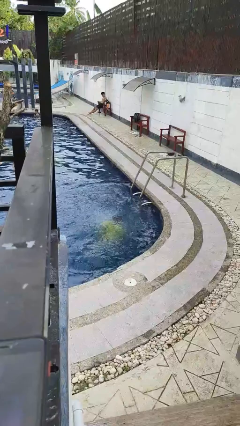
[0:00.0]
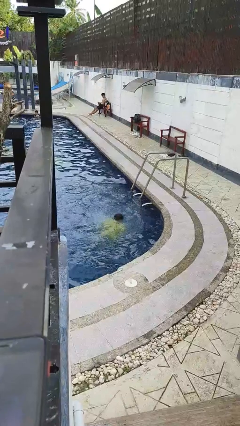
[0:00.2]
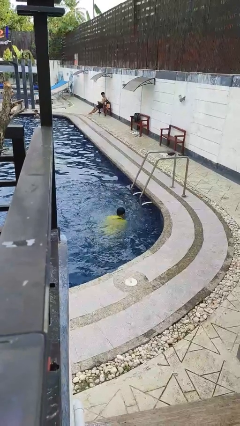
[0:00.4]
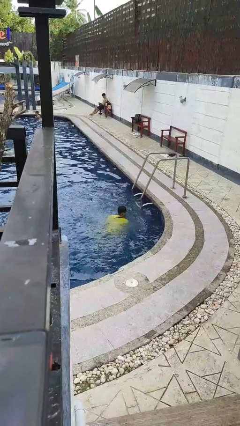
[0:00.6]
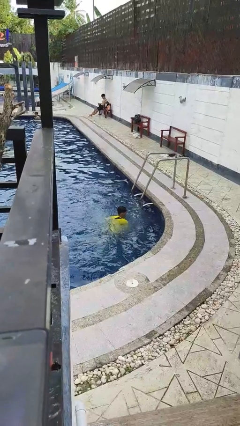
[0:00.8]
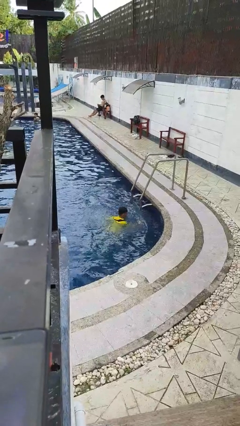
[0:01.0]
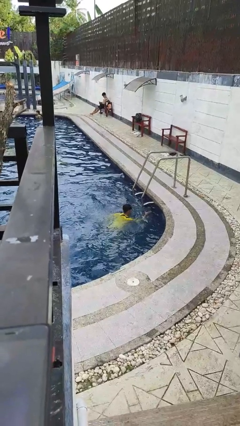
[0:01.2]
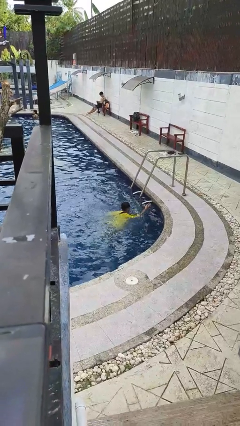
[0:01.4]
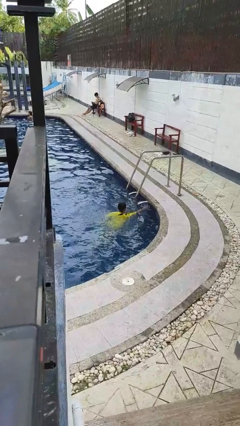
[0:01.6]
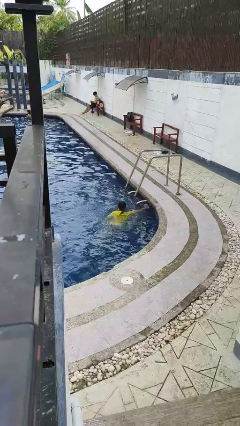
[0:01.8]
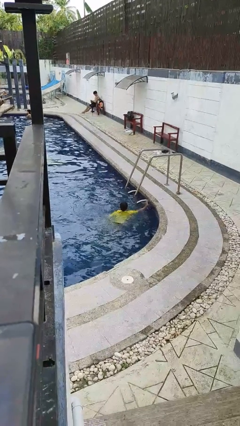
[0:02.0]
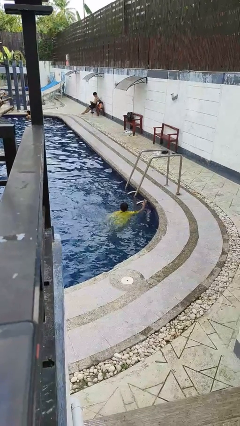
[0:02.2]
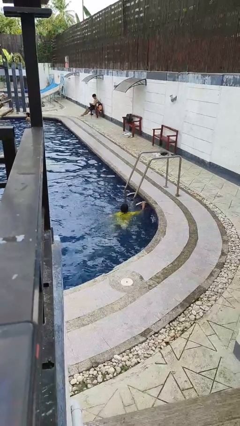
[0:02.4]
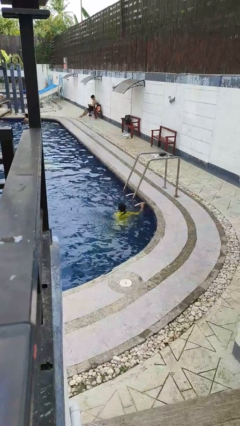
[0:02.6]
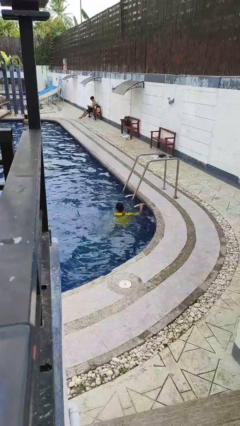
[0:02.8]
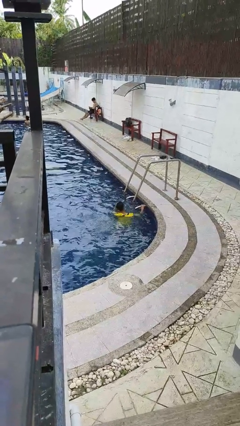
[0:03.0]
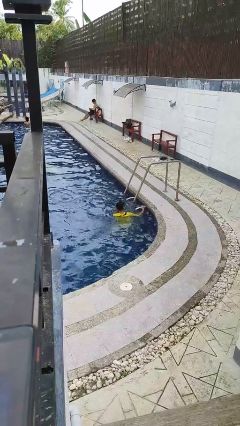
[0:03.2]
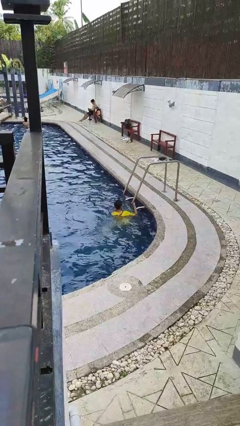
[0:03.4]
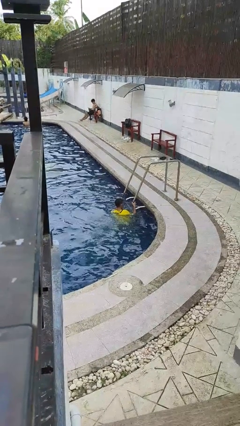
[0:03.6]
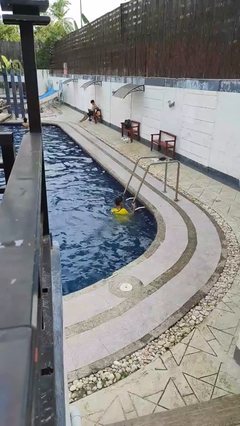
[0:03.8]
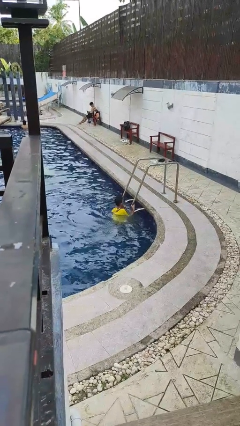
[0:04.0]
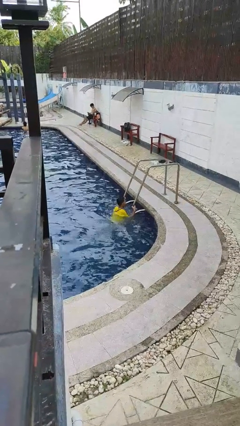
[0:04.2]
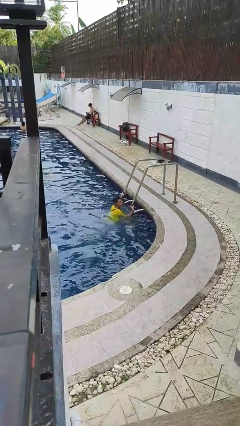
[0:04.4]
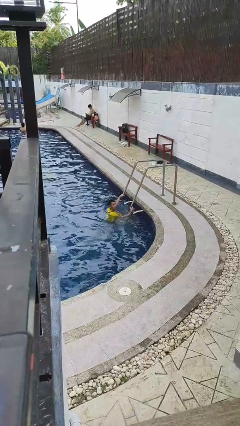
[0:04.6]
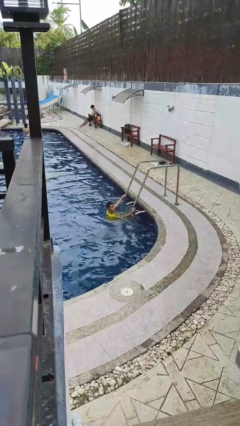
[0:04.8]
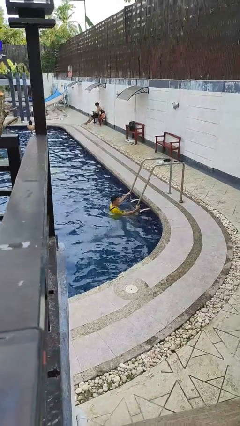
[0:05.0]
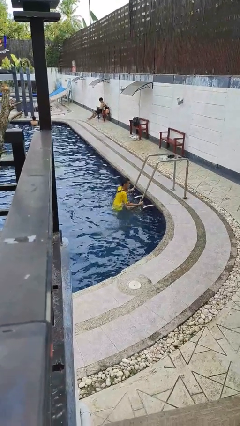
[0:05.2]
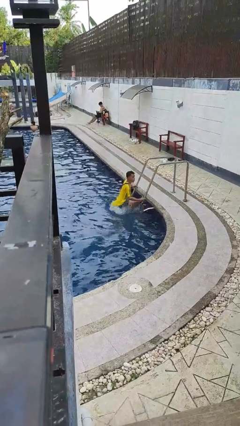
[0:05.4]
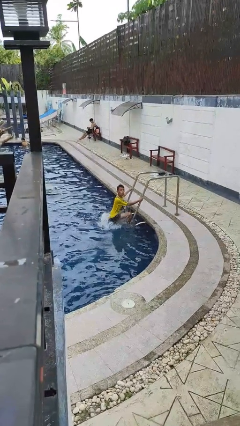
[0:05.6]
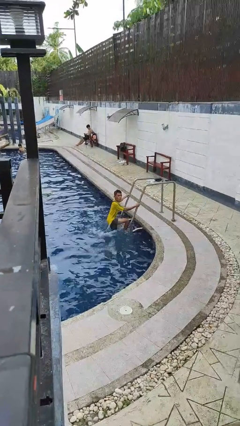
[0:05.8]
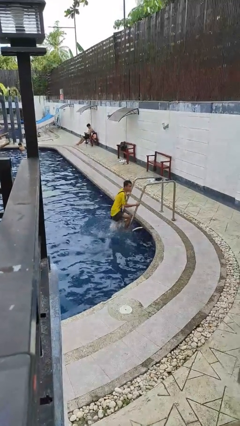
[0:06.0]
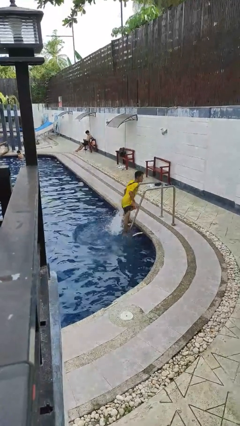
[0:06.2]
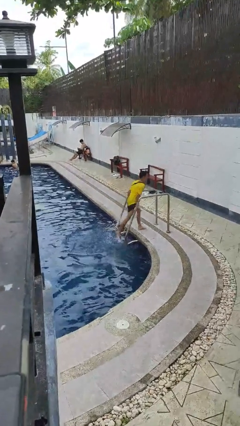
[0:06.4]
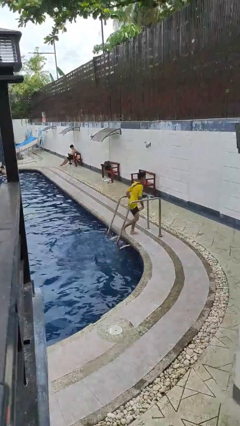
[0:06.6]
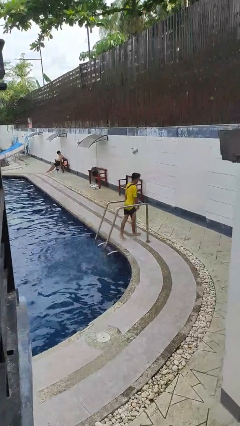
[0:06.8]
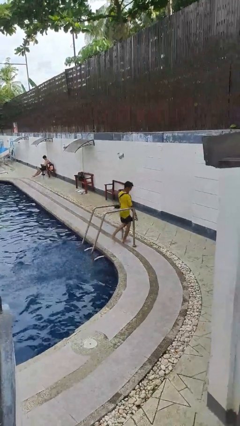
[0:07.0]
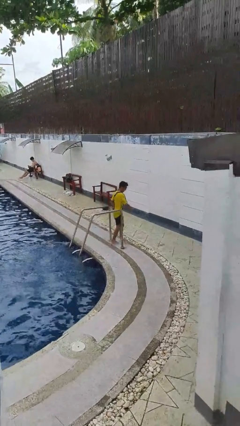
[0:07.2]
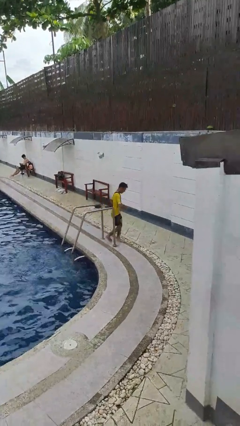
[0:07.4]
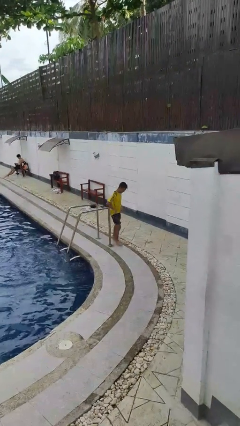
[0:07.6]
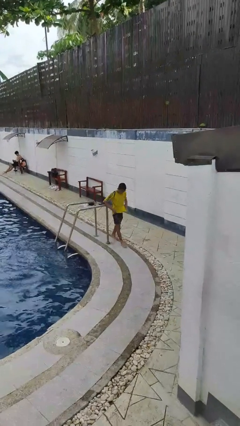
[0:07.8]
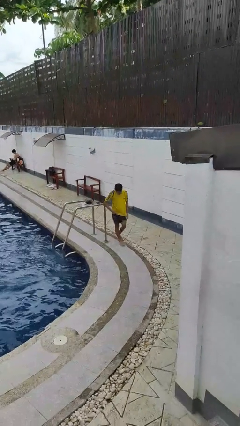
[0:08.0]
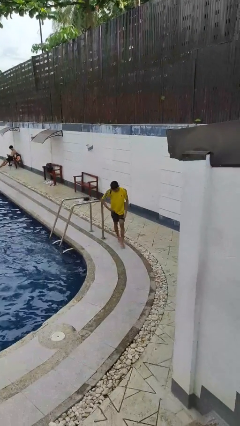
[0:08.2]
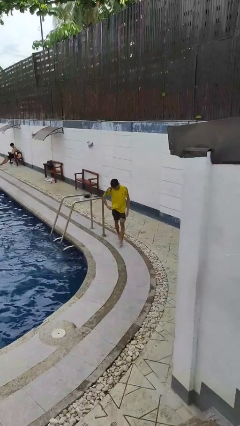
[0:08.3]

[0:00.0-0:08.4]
person exits pool

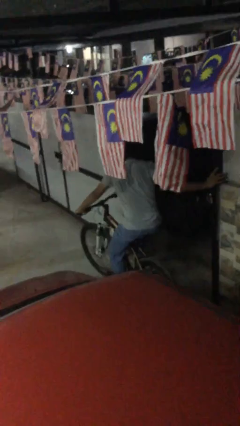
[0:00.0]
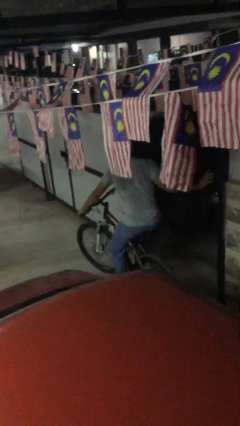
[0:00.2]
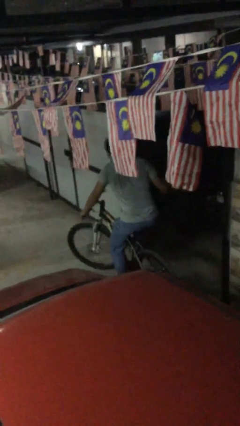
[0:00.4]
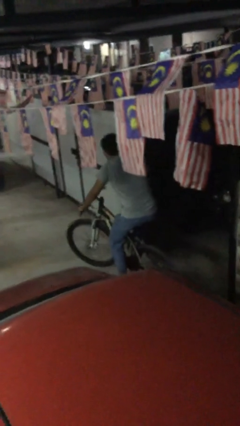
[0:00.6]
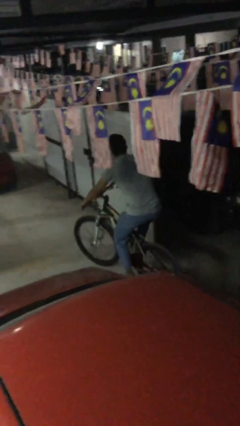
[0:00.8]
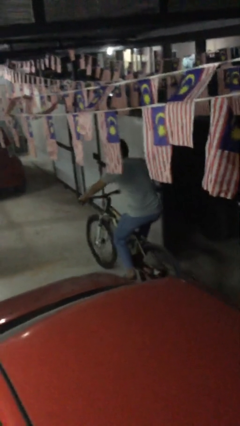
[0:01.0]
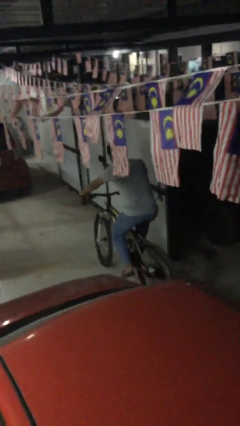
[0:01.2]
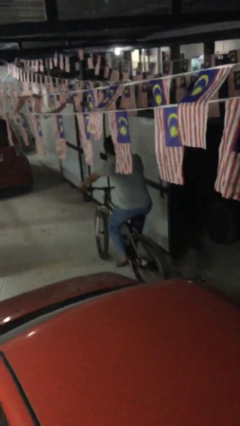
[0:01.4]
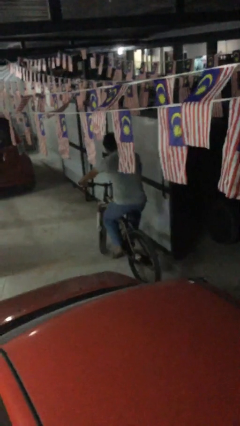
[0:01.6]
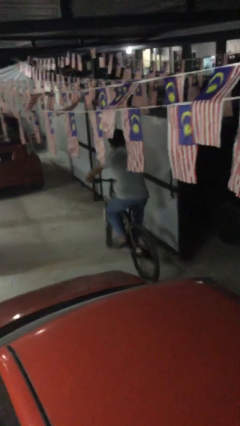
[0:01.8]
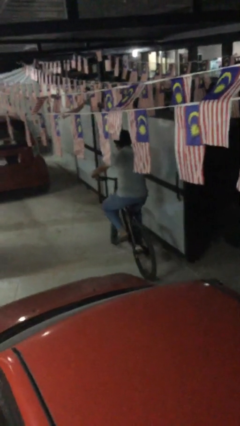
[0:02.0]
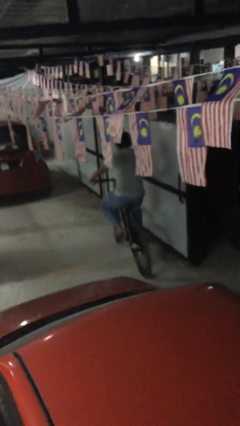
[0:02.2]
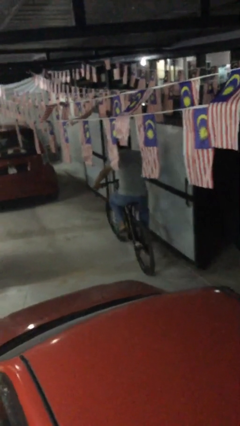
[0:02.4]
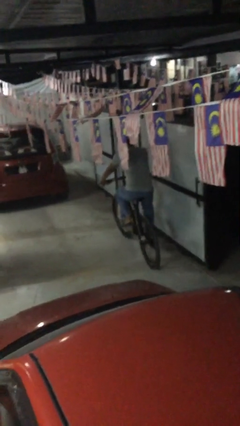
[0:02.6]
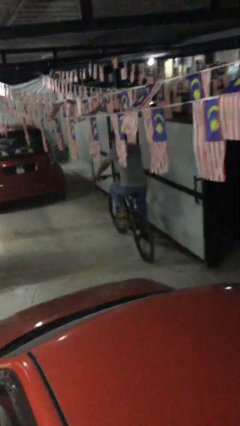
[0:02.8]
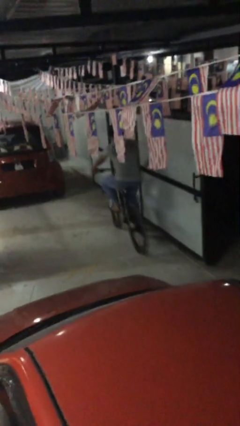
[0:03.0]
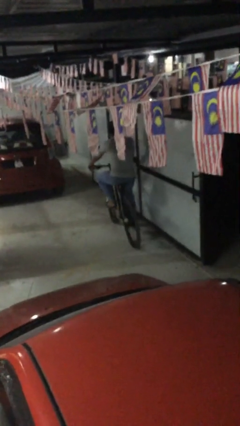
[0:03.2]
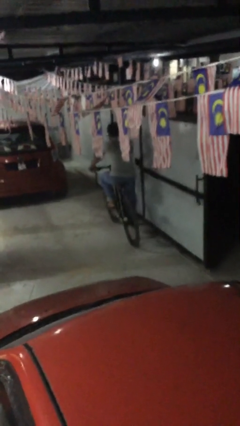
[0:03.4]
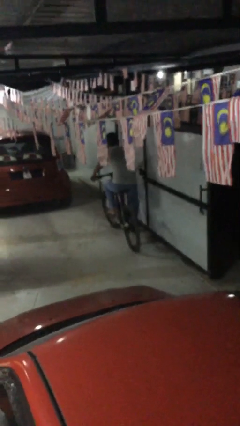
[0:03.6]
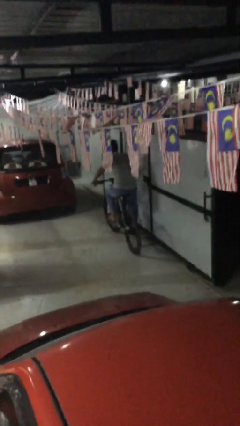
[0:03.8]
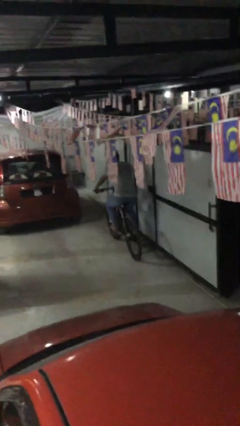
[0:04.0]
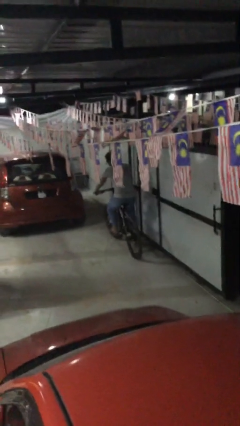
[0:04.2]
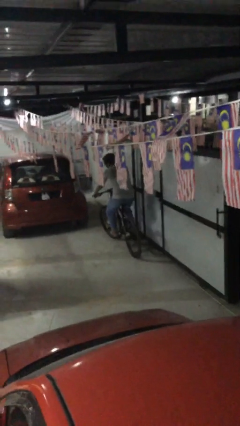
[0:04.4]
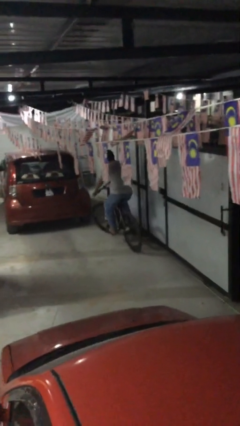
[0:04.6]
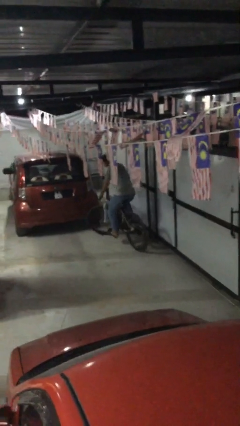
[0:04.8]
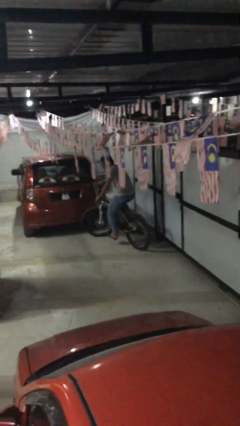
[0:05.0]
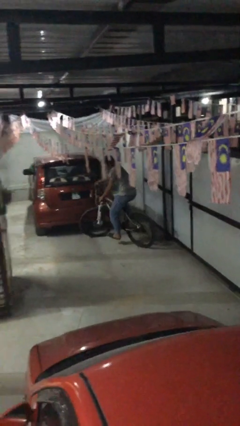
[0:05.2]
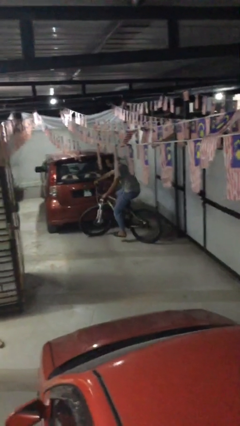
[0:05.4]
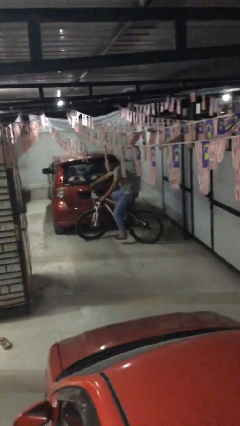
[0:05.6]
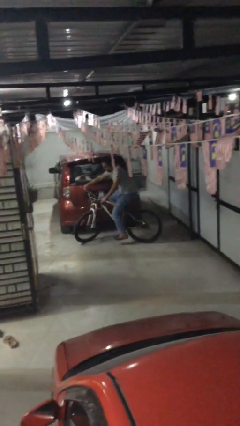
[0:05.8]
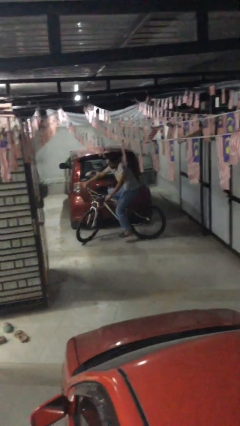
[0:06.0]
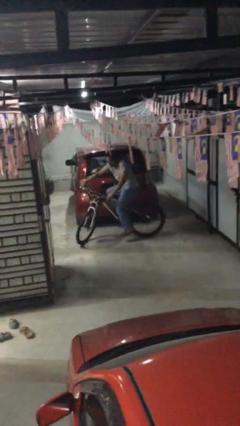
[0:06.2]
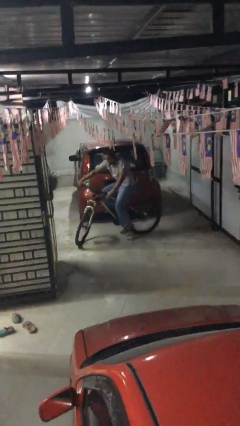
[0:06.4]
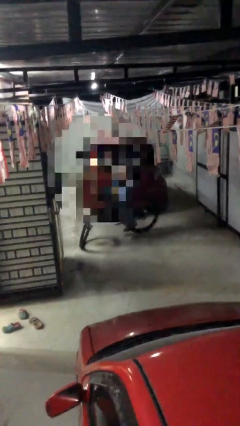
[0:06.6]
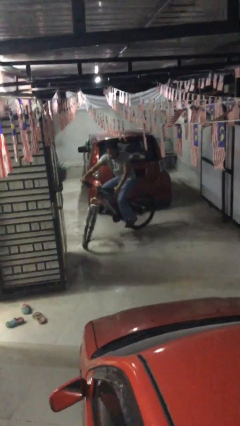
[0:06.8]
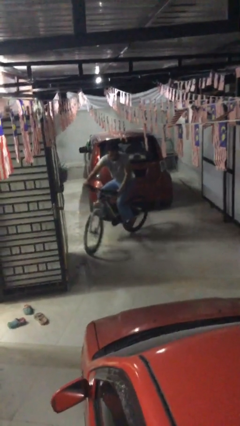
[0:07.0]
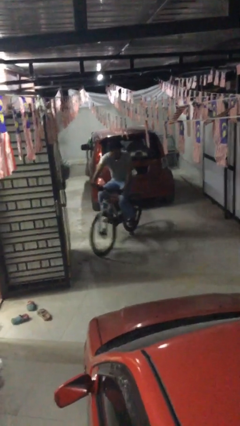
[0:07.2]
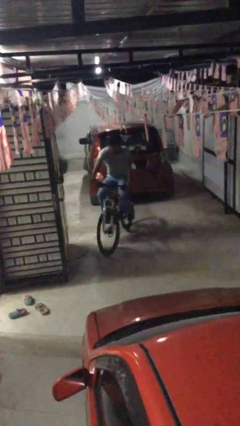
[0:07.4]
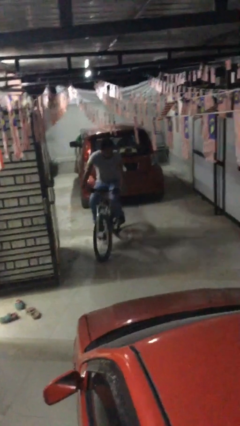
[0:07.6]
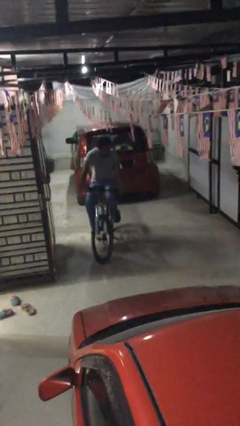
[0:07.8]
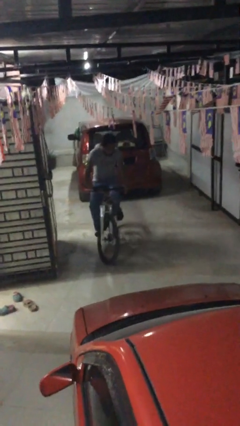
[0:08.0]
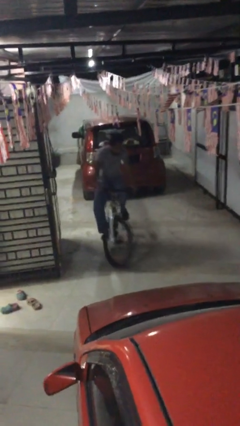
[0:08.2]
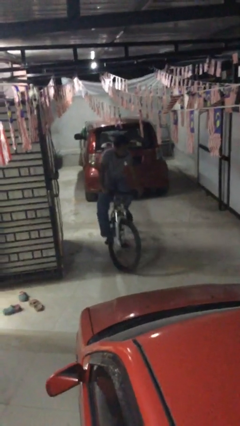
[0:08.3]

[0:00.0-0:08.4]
person rides bicycle

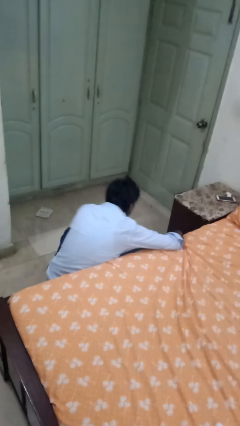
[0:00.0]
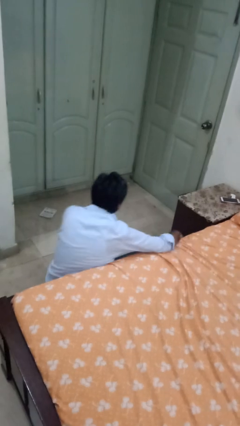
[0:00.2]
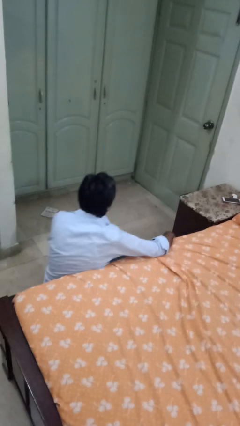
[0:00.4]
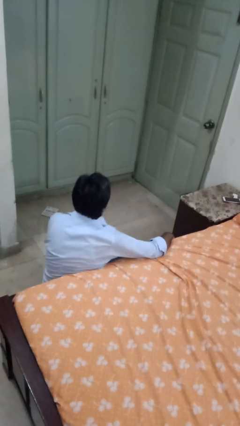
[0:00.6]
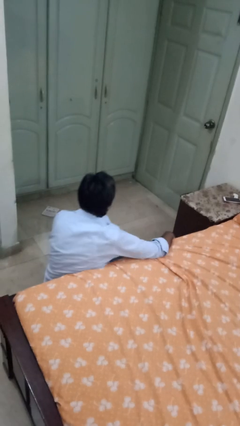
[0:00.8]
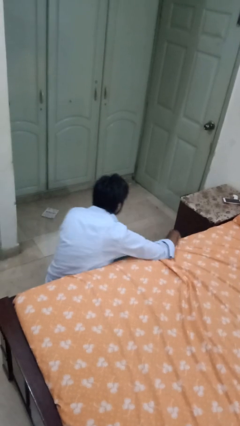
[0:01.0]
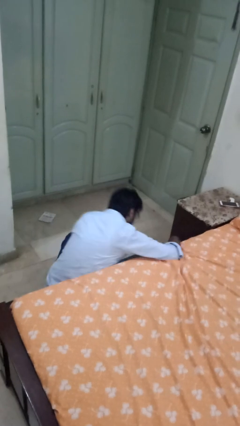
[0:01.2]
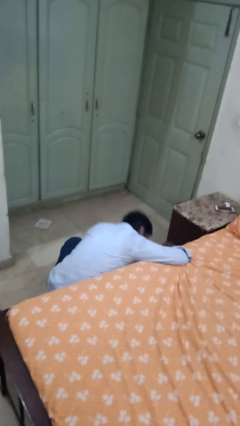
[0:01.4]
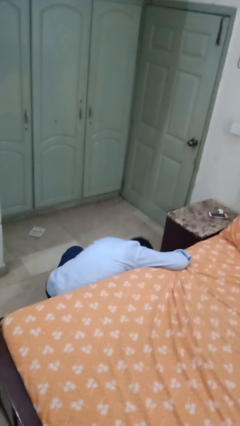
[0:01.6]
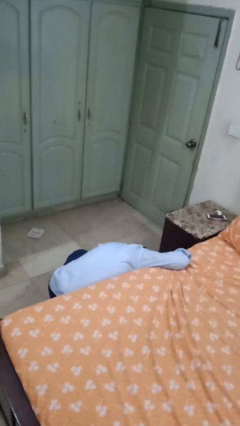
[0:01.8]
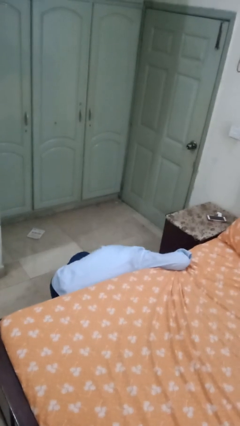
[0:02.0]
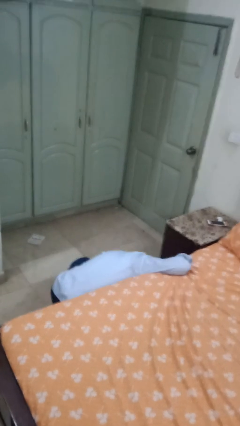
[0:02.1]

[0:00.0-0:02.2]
person searches under bed
